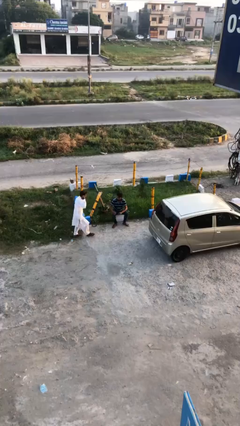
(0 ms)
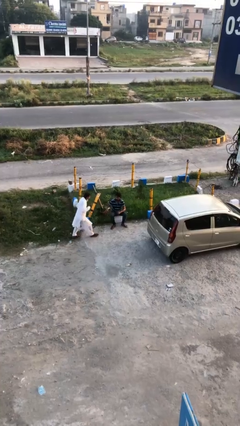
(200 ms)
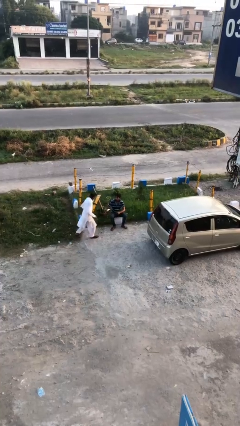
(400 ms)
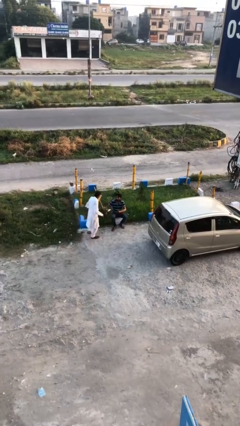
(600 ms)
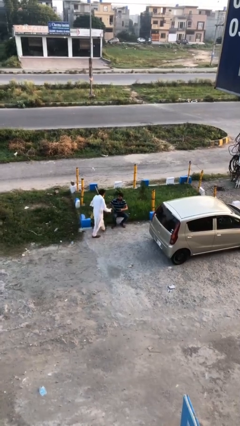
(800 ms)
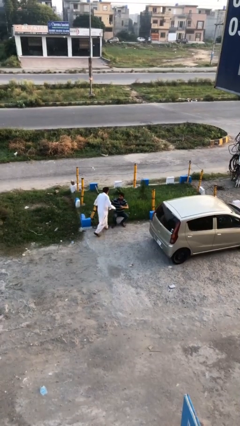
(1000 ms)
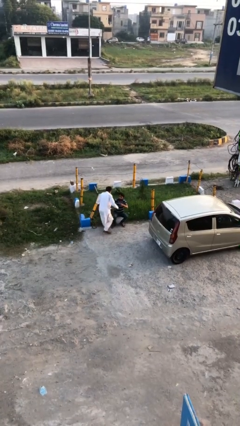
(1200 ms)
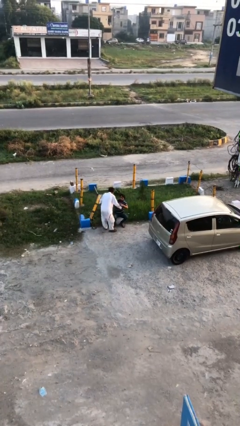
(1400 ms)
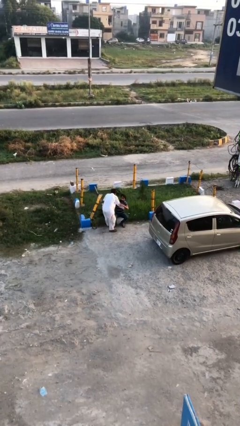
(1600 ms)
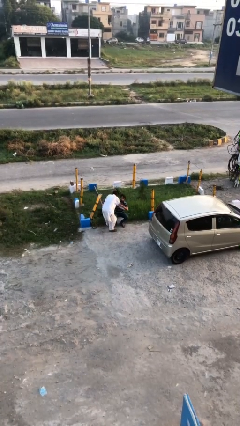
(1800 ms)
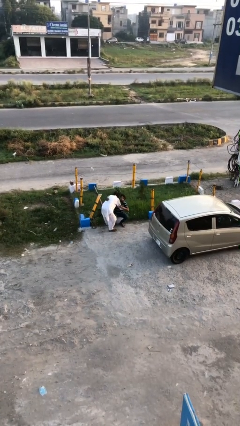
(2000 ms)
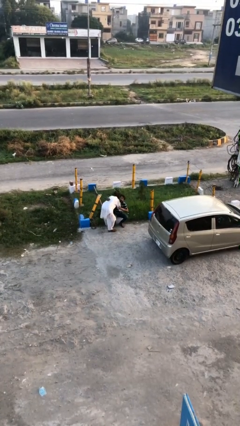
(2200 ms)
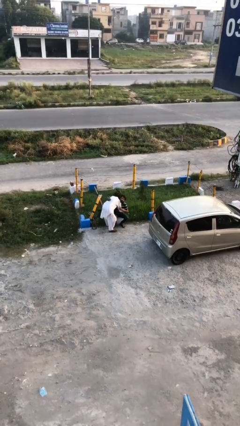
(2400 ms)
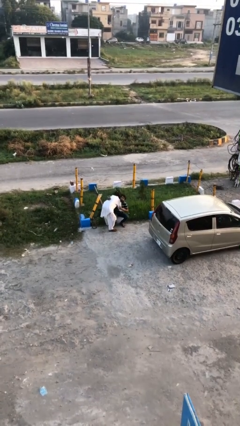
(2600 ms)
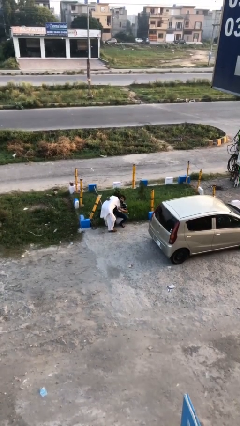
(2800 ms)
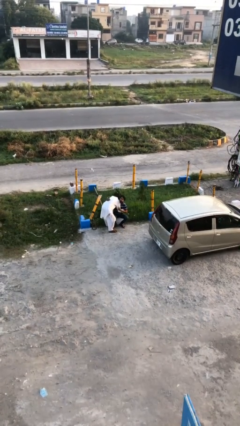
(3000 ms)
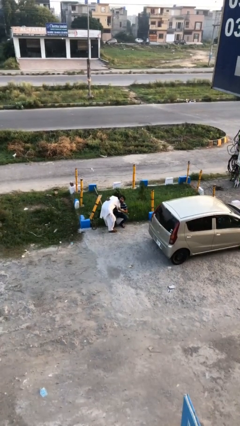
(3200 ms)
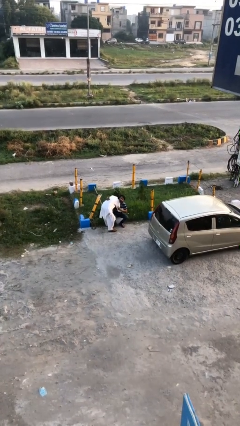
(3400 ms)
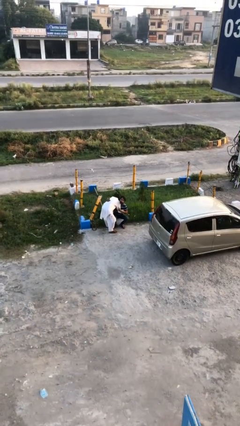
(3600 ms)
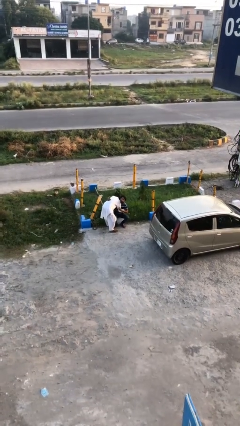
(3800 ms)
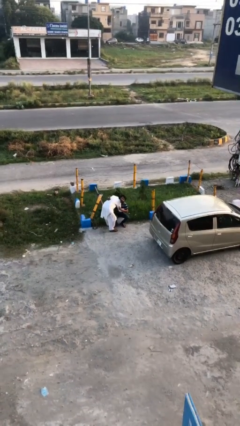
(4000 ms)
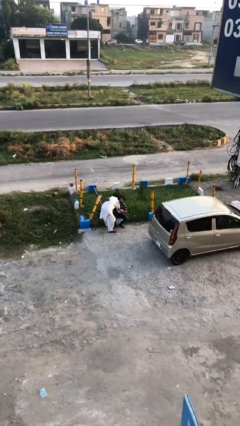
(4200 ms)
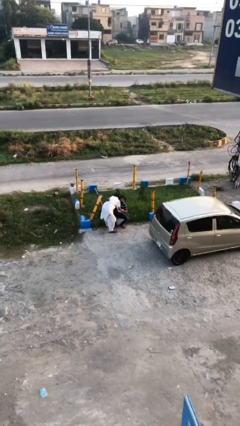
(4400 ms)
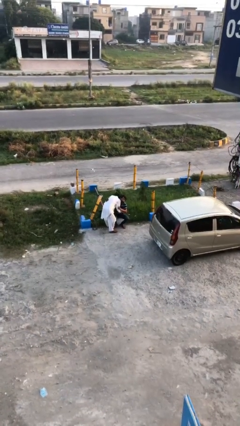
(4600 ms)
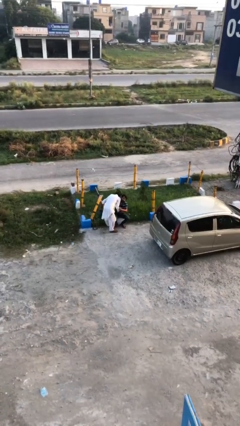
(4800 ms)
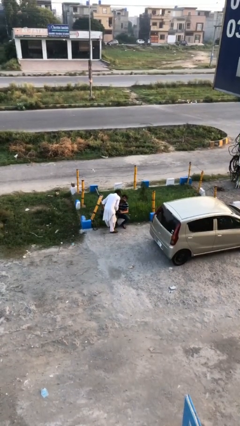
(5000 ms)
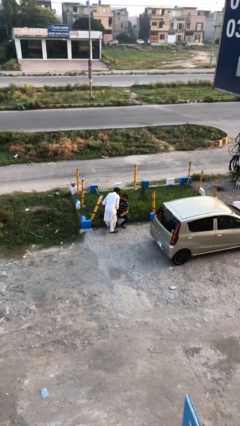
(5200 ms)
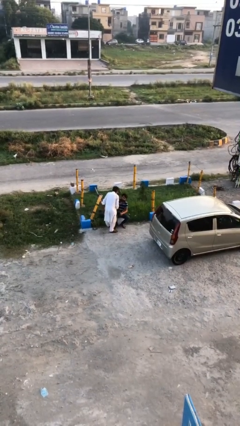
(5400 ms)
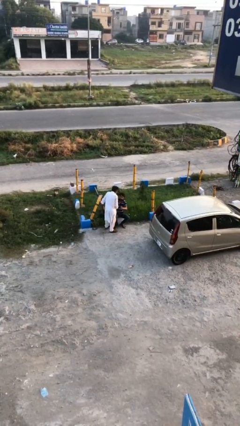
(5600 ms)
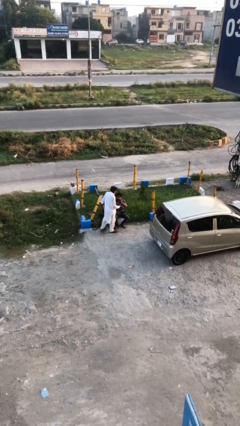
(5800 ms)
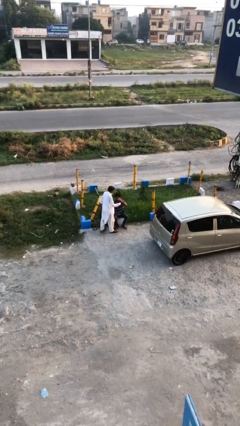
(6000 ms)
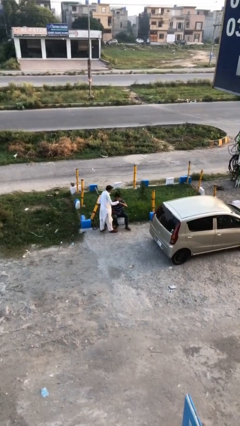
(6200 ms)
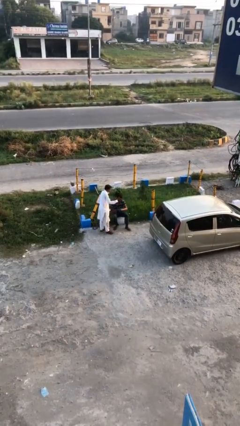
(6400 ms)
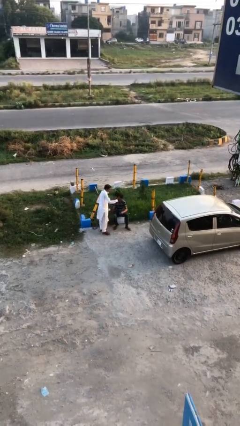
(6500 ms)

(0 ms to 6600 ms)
person embraces person

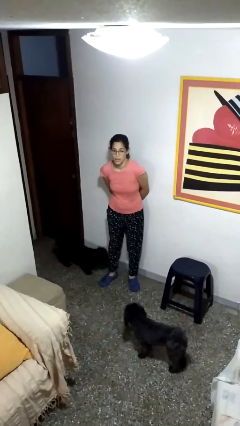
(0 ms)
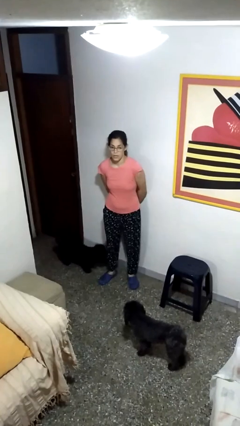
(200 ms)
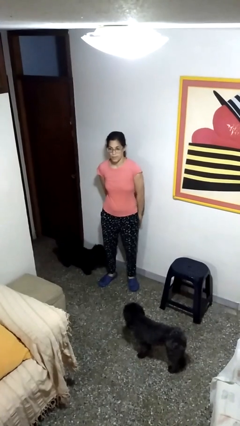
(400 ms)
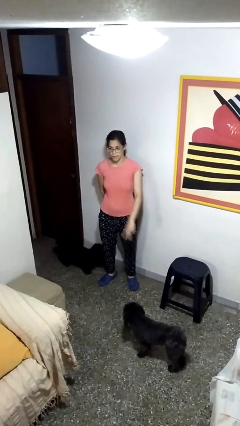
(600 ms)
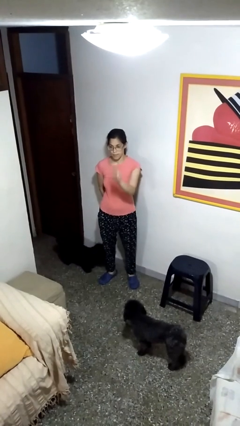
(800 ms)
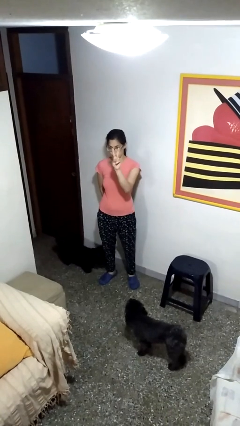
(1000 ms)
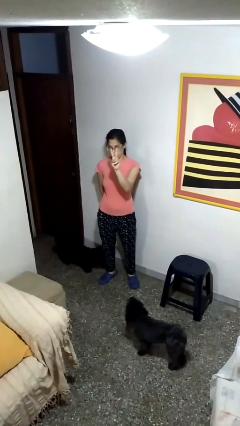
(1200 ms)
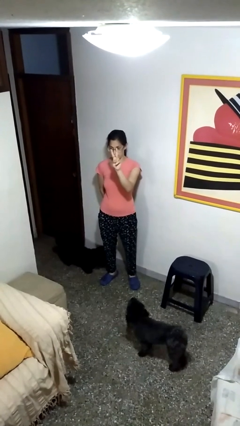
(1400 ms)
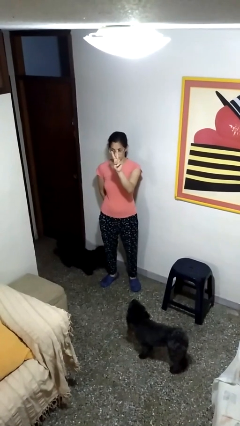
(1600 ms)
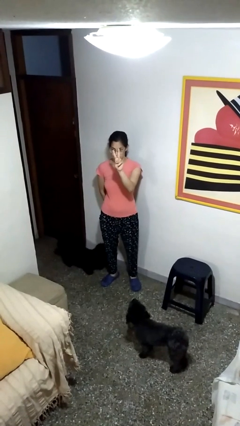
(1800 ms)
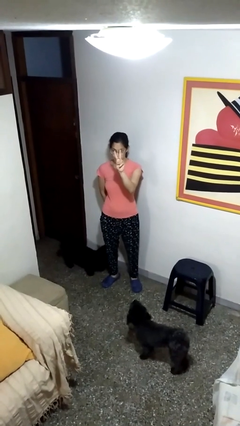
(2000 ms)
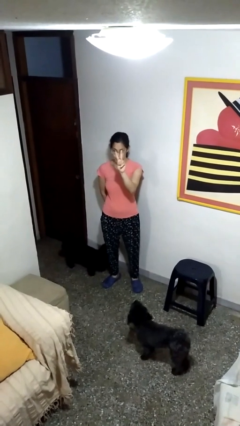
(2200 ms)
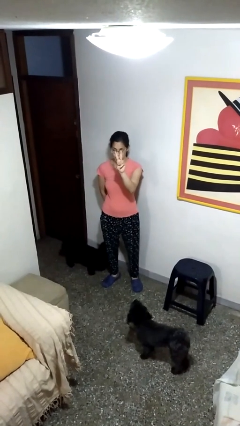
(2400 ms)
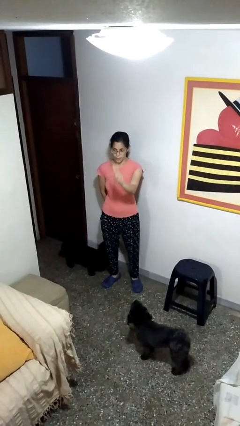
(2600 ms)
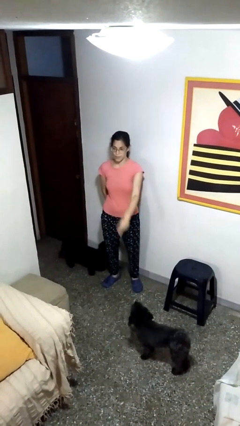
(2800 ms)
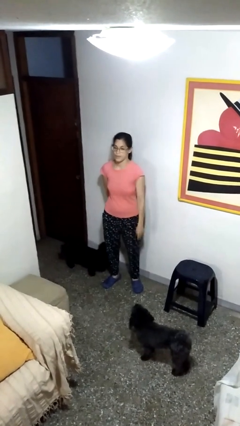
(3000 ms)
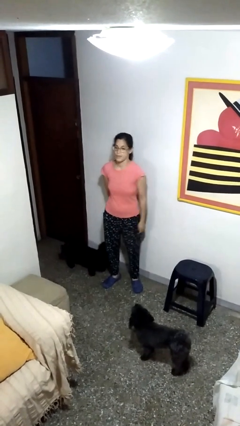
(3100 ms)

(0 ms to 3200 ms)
person gestures peace

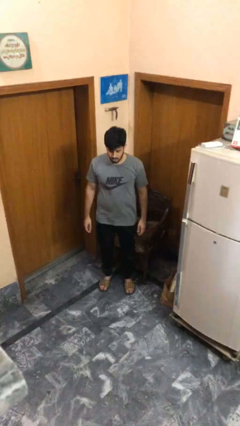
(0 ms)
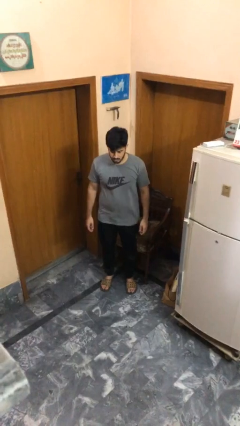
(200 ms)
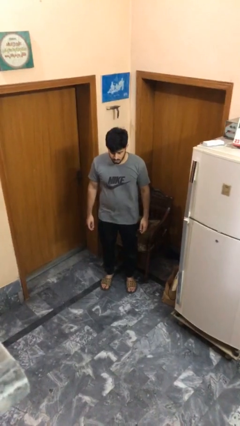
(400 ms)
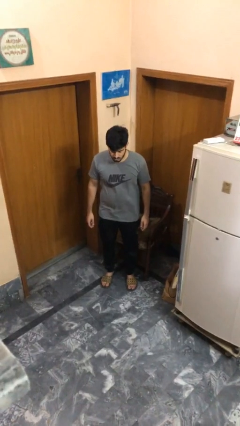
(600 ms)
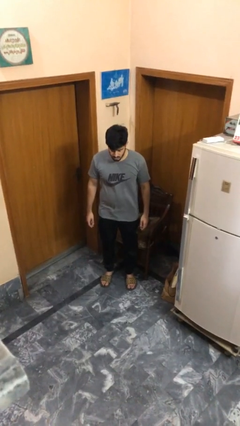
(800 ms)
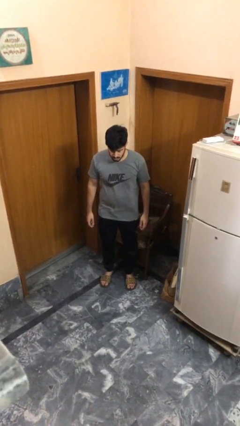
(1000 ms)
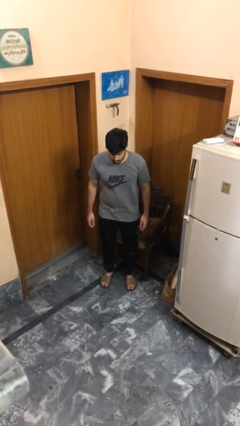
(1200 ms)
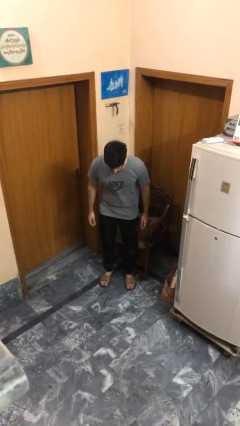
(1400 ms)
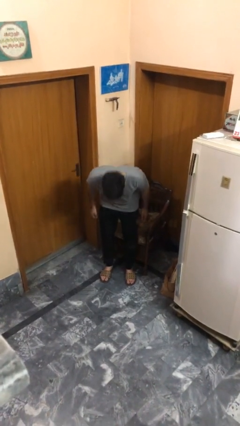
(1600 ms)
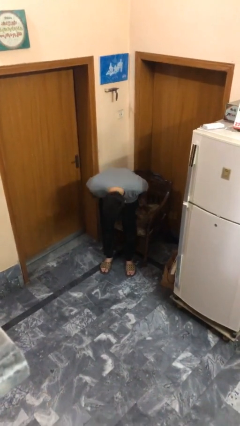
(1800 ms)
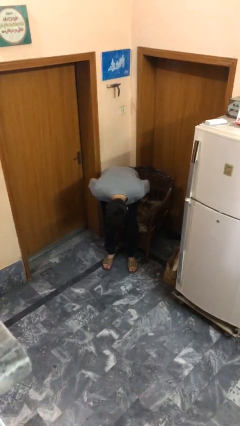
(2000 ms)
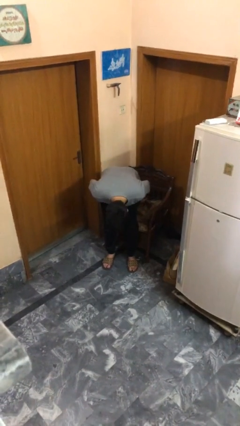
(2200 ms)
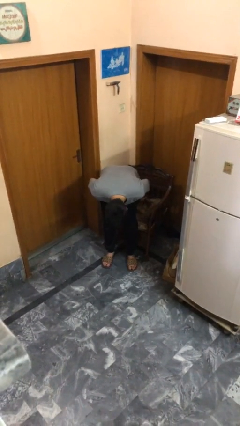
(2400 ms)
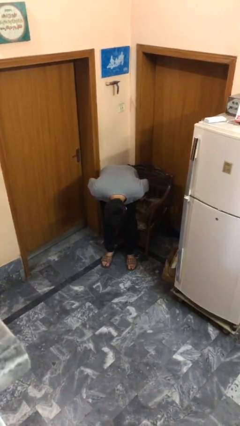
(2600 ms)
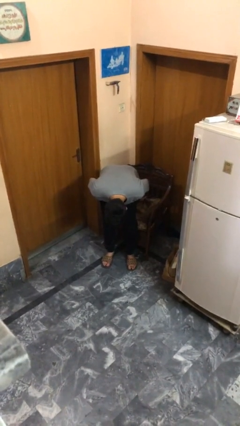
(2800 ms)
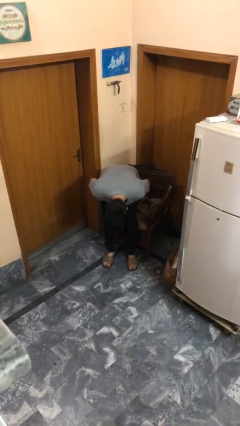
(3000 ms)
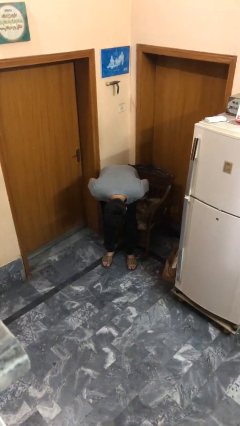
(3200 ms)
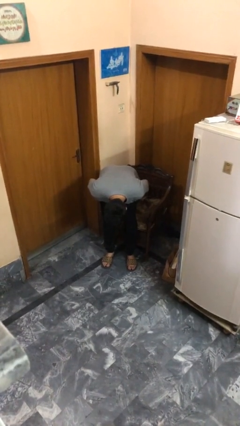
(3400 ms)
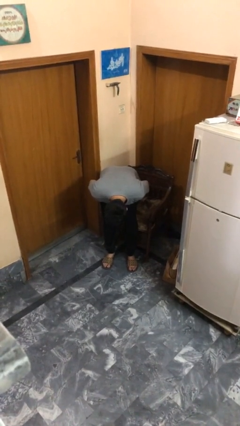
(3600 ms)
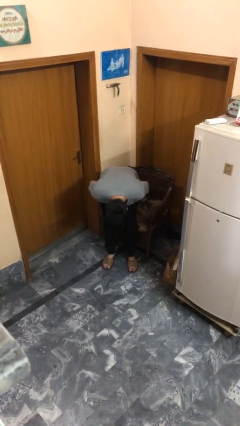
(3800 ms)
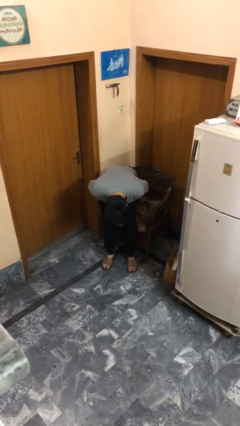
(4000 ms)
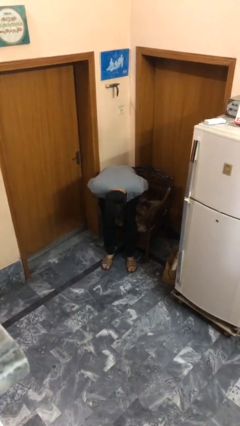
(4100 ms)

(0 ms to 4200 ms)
person bows

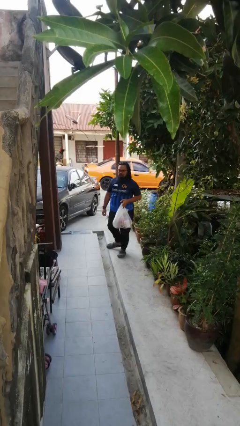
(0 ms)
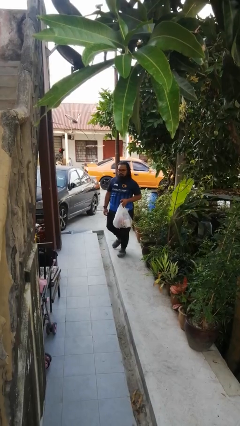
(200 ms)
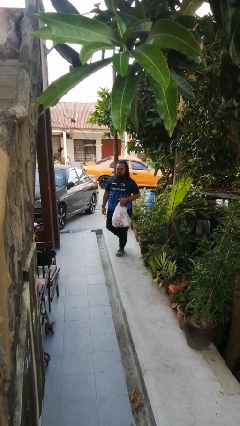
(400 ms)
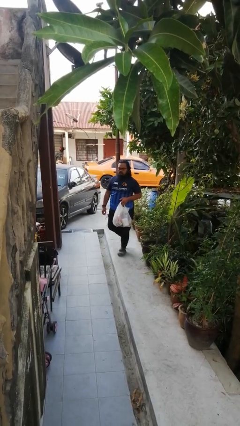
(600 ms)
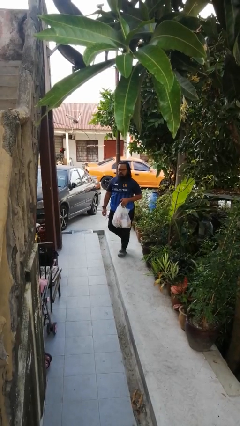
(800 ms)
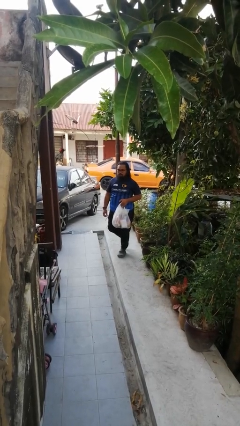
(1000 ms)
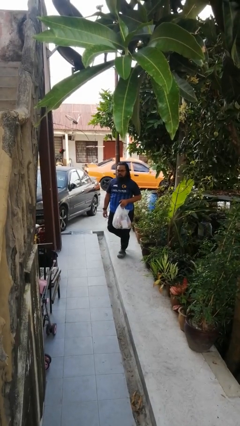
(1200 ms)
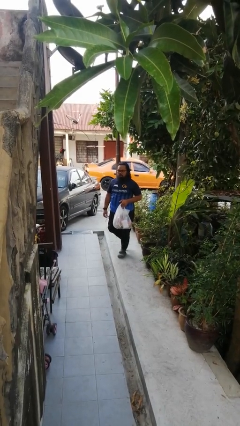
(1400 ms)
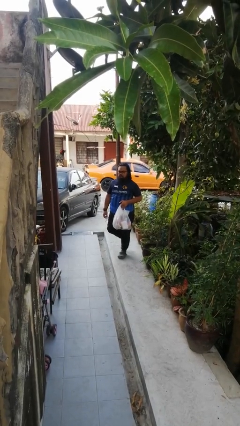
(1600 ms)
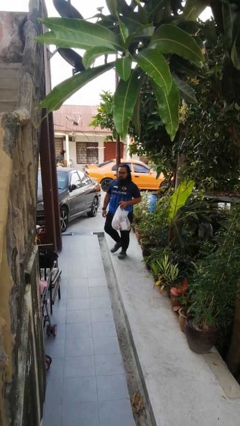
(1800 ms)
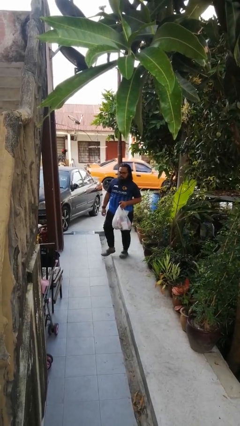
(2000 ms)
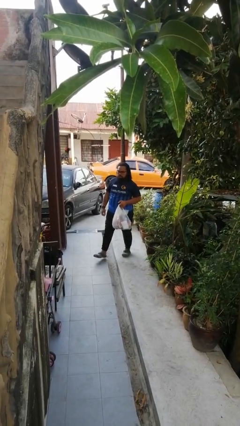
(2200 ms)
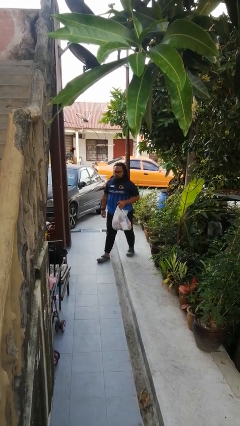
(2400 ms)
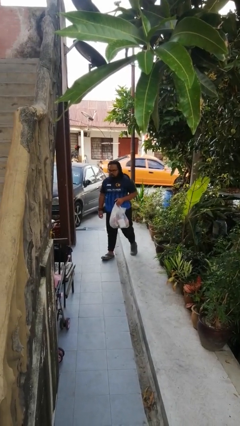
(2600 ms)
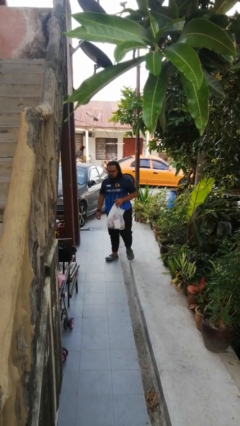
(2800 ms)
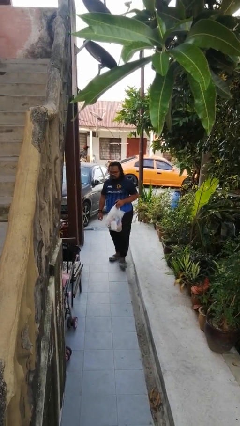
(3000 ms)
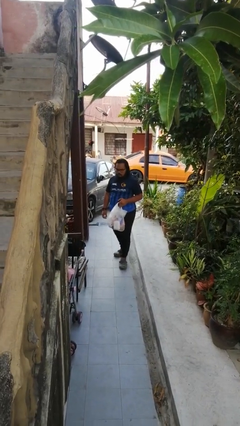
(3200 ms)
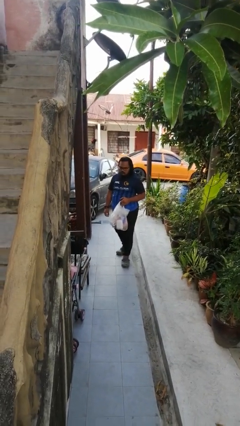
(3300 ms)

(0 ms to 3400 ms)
person carries groceries

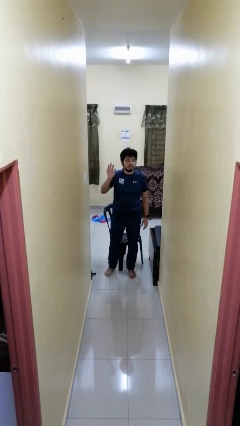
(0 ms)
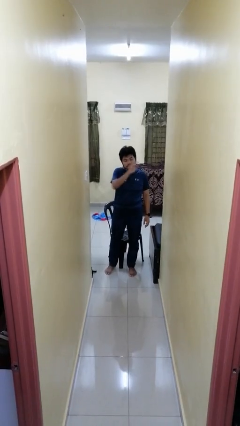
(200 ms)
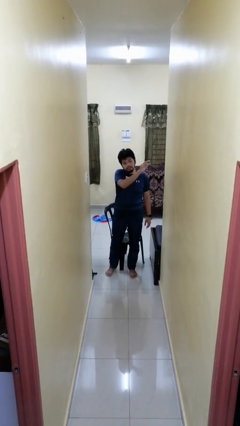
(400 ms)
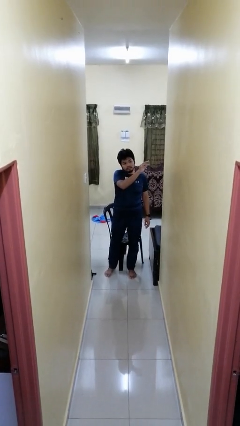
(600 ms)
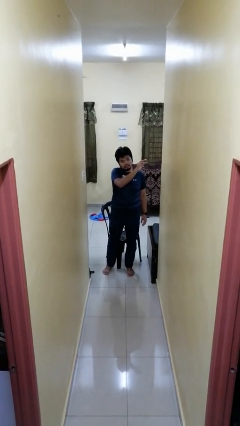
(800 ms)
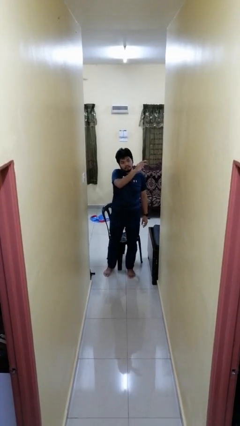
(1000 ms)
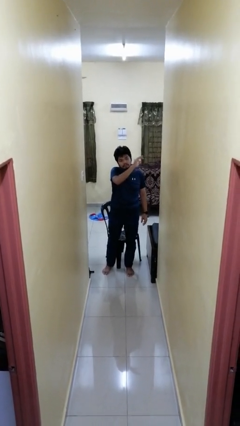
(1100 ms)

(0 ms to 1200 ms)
person gestures swipe left
